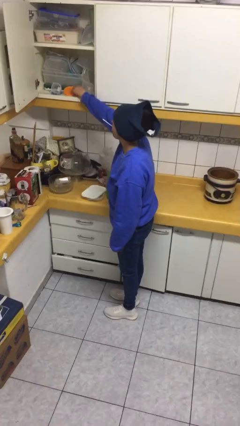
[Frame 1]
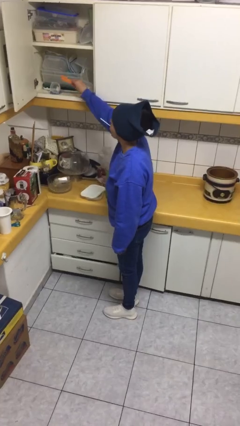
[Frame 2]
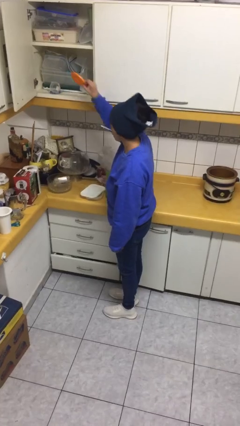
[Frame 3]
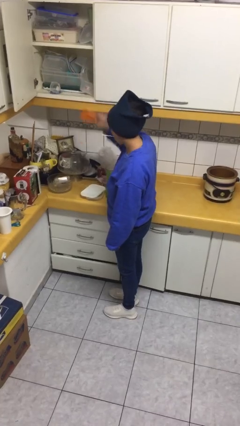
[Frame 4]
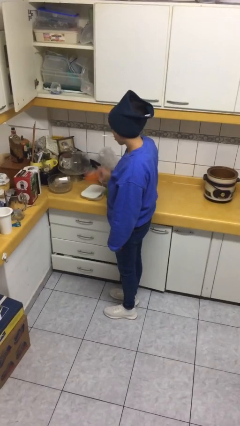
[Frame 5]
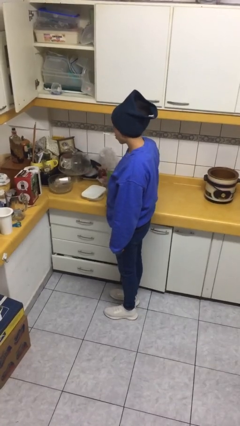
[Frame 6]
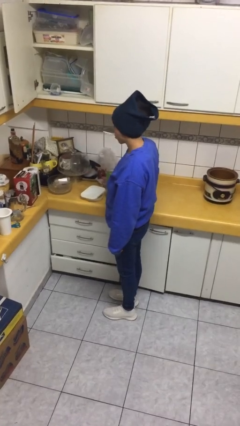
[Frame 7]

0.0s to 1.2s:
person takes object from cabinet

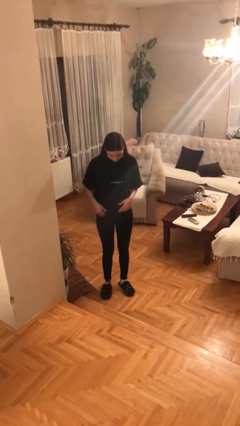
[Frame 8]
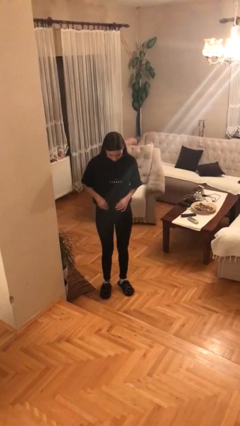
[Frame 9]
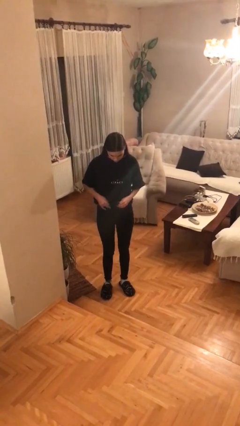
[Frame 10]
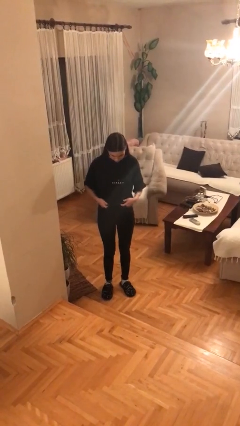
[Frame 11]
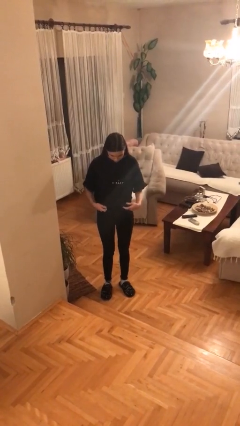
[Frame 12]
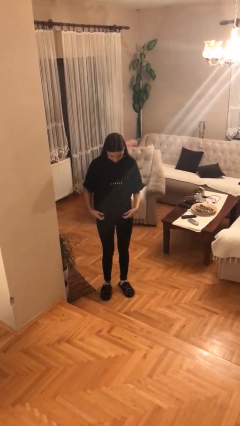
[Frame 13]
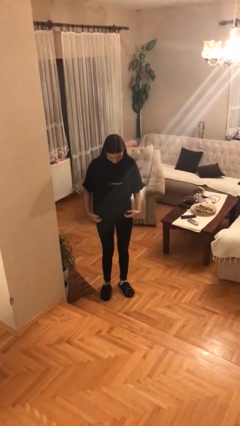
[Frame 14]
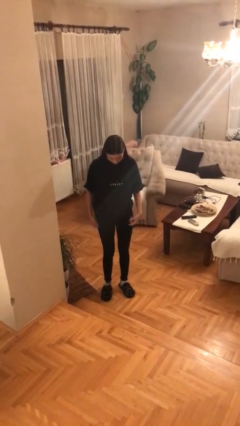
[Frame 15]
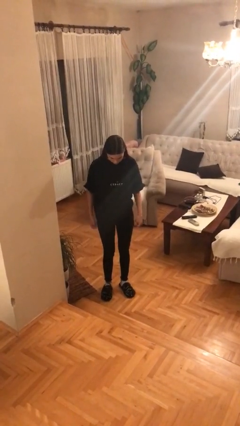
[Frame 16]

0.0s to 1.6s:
person untucks shirt

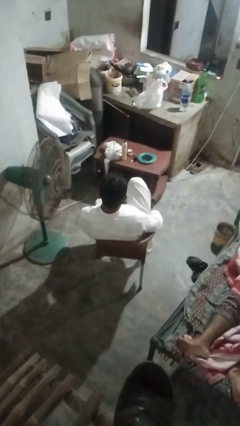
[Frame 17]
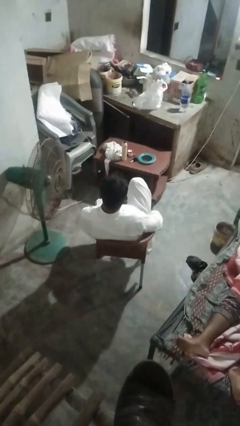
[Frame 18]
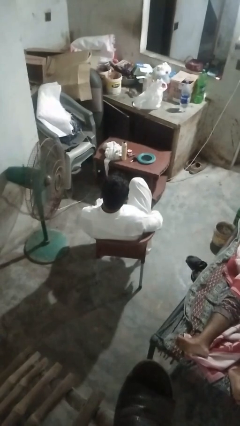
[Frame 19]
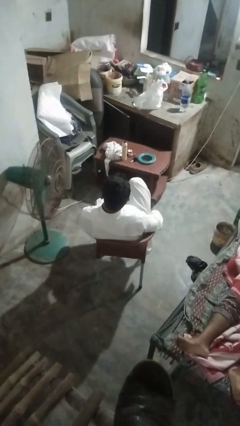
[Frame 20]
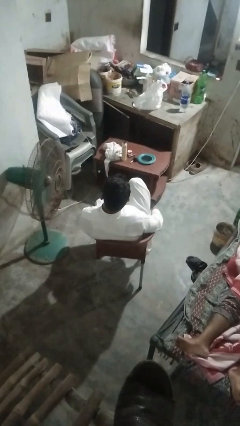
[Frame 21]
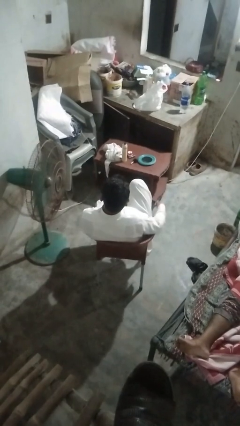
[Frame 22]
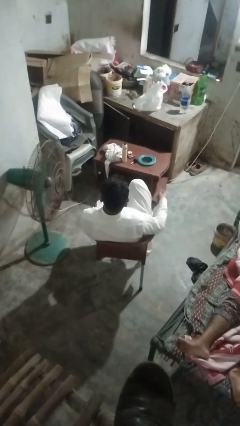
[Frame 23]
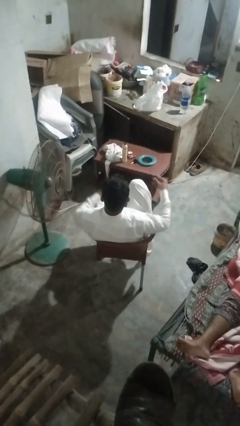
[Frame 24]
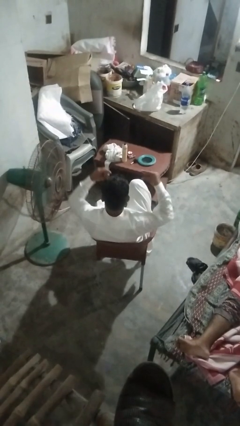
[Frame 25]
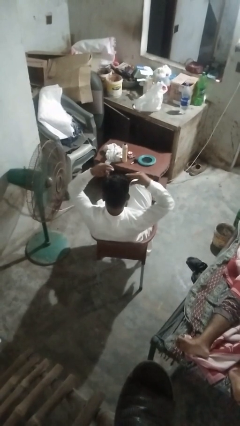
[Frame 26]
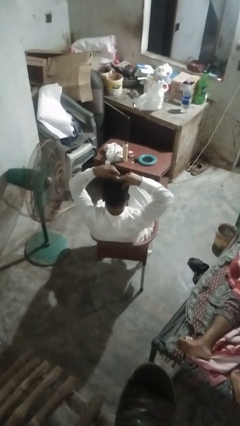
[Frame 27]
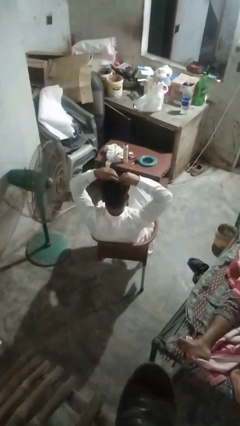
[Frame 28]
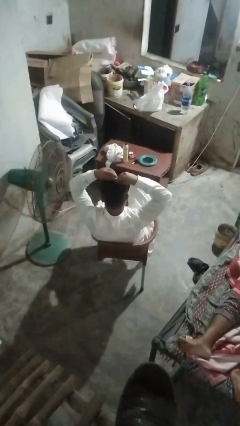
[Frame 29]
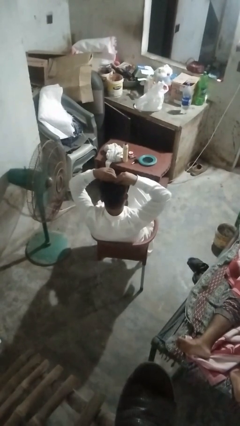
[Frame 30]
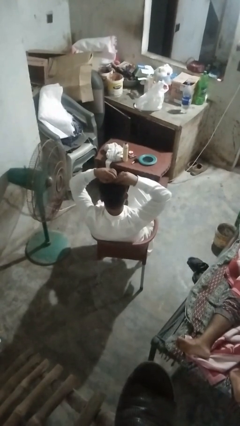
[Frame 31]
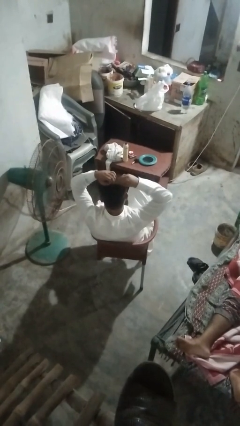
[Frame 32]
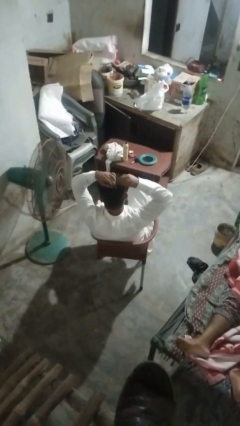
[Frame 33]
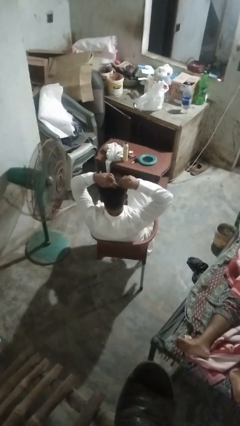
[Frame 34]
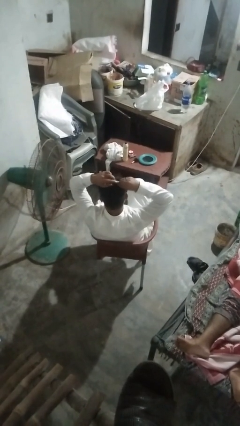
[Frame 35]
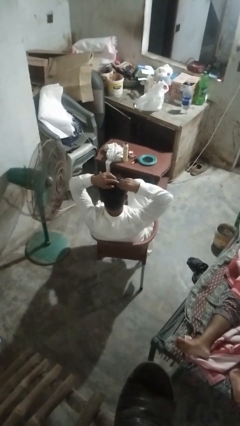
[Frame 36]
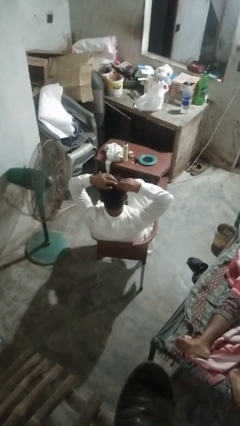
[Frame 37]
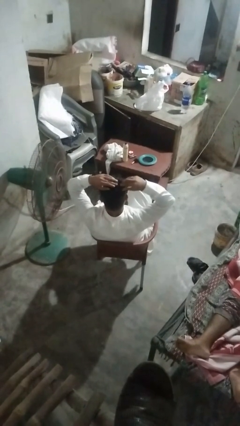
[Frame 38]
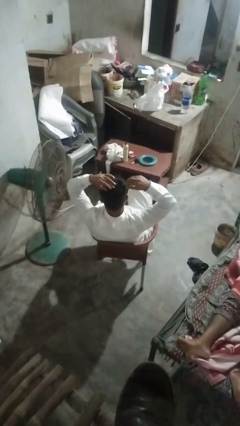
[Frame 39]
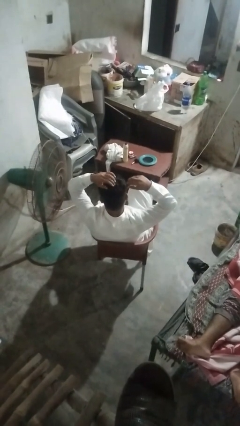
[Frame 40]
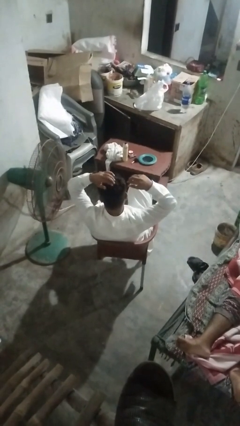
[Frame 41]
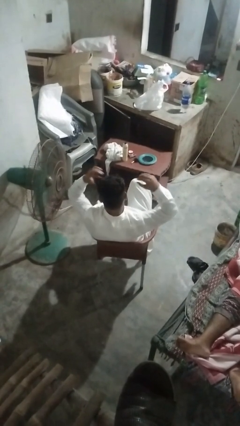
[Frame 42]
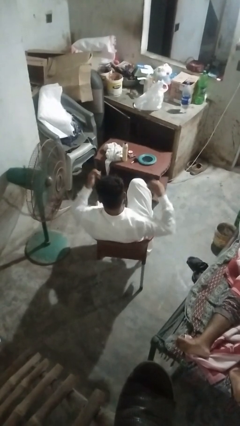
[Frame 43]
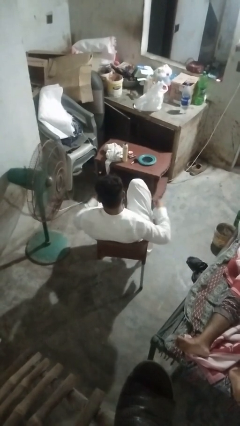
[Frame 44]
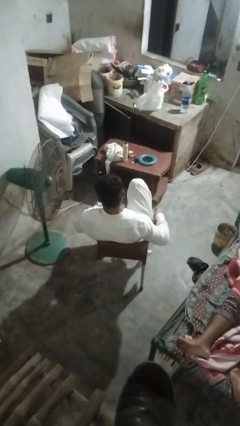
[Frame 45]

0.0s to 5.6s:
person puts hair in ponytail

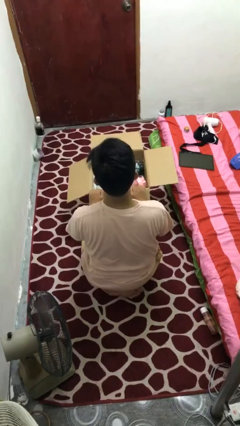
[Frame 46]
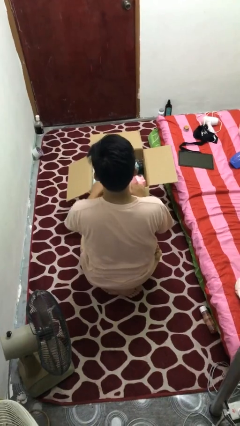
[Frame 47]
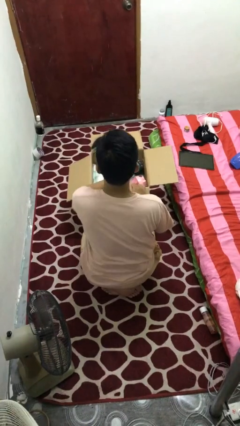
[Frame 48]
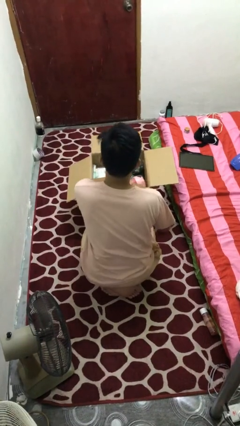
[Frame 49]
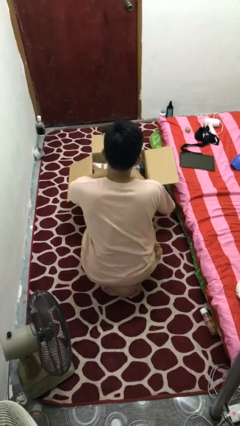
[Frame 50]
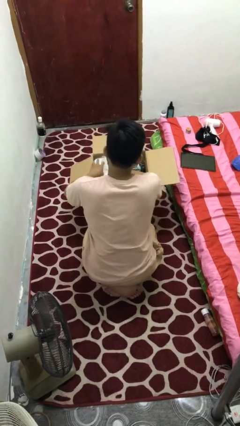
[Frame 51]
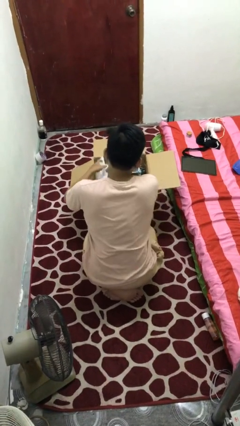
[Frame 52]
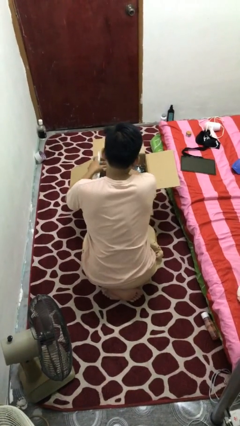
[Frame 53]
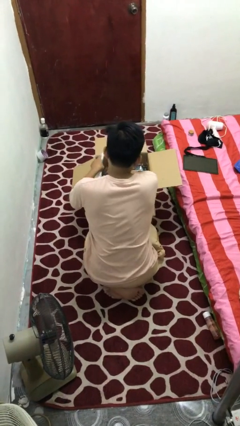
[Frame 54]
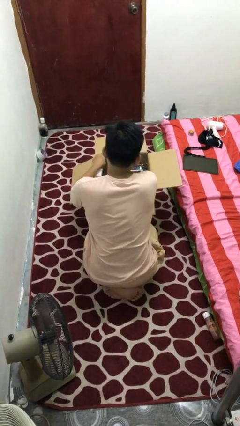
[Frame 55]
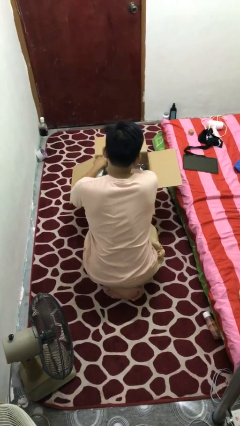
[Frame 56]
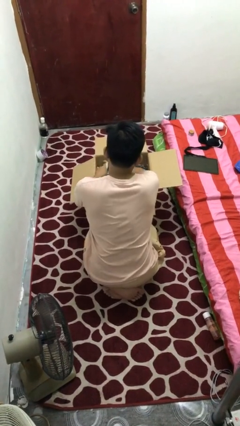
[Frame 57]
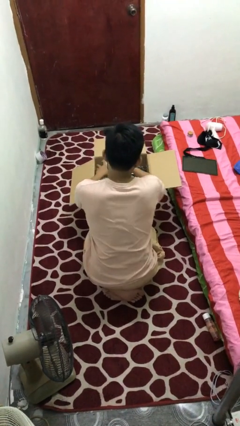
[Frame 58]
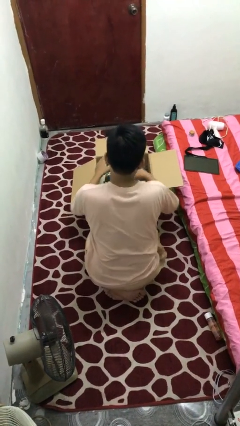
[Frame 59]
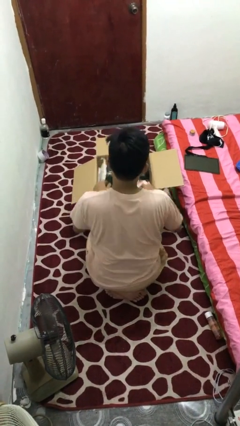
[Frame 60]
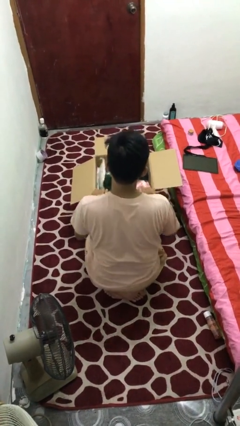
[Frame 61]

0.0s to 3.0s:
person searches in box

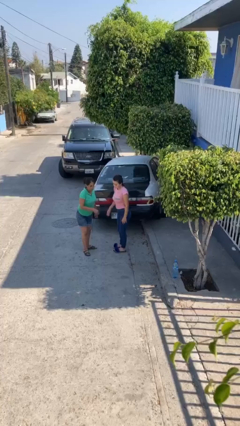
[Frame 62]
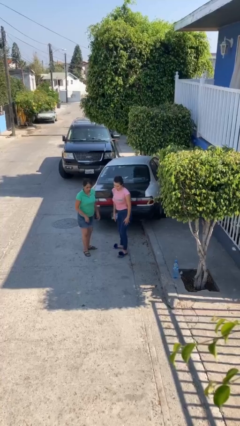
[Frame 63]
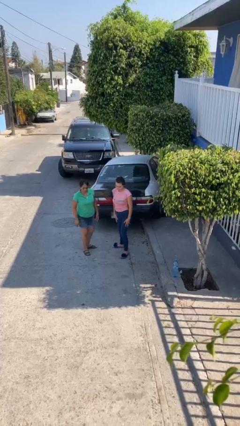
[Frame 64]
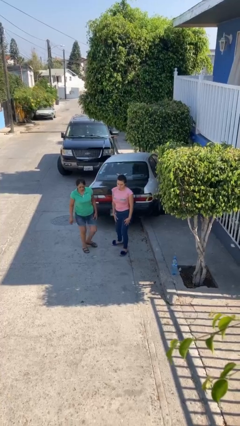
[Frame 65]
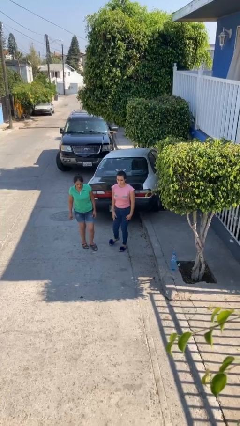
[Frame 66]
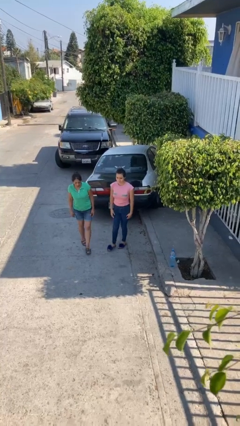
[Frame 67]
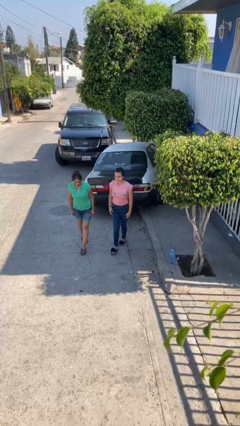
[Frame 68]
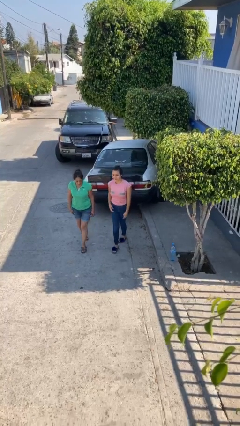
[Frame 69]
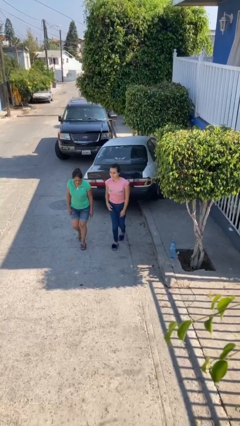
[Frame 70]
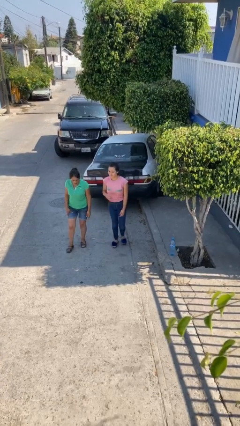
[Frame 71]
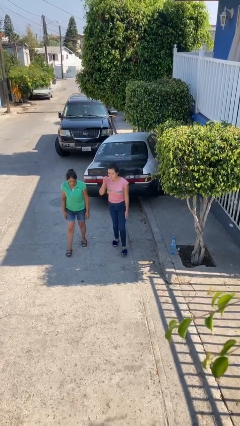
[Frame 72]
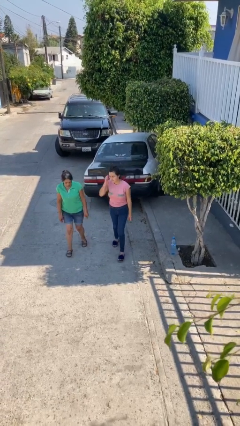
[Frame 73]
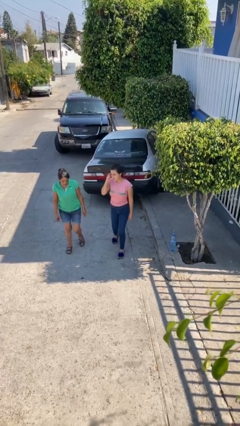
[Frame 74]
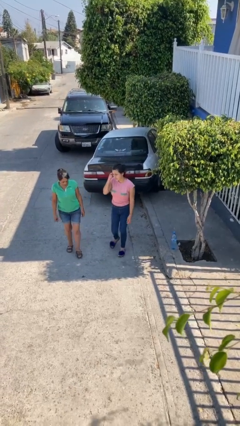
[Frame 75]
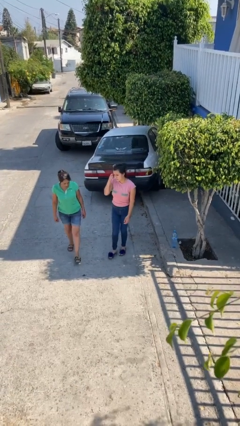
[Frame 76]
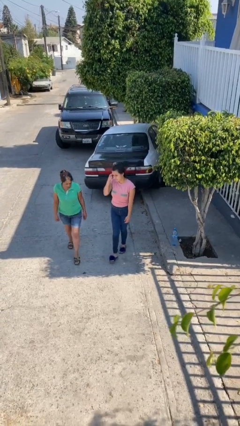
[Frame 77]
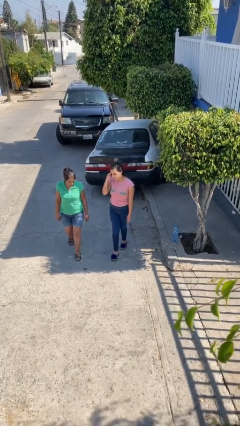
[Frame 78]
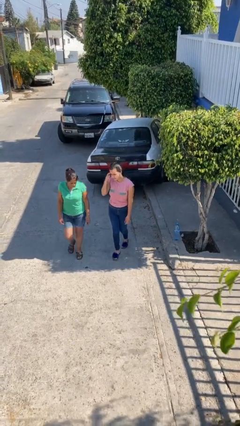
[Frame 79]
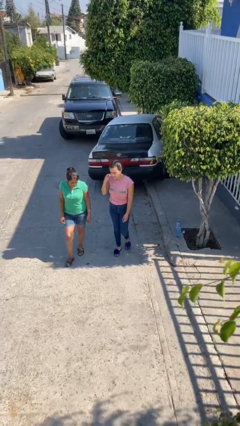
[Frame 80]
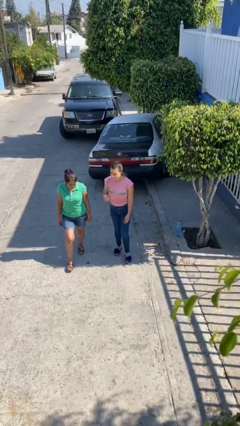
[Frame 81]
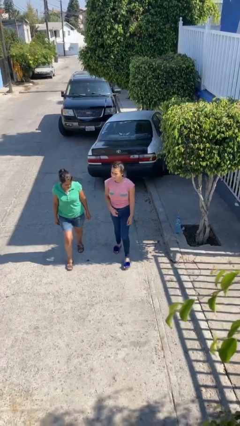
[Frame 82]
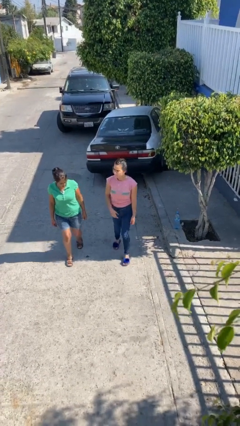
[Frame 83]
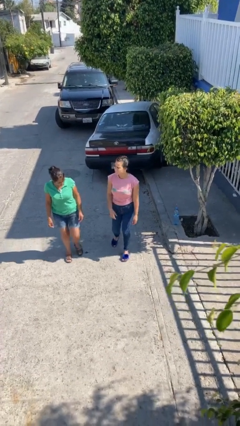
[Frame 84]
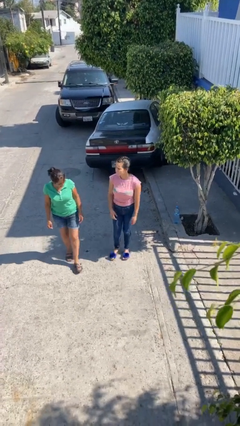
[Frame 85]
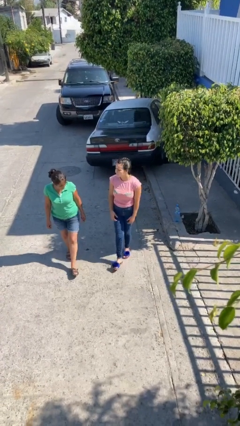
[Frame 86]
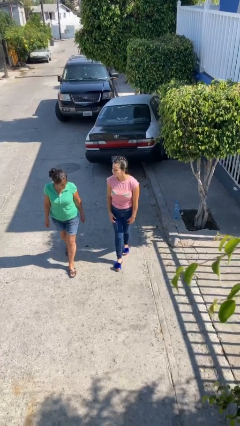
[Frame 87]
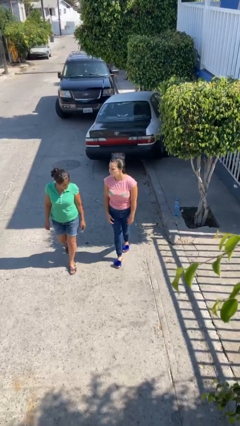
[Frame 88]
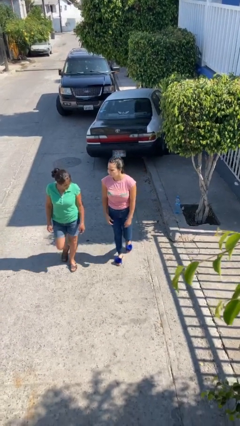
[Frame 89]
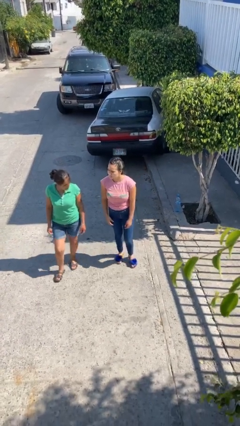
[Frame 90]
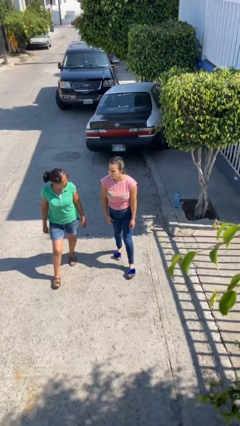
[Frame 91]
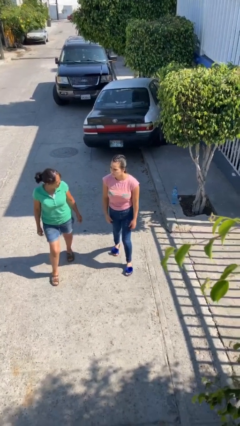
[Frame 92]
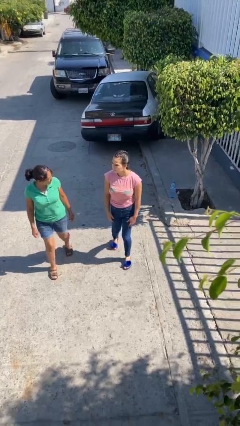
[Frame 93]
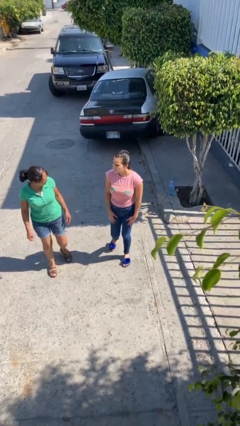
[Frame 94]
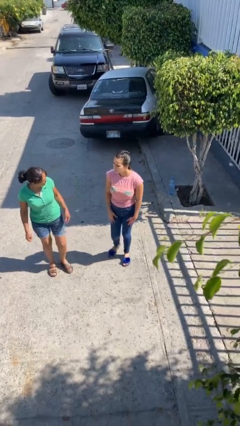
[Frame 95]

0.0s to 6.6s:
person talks to person
